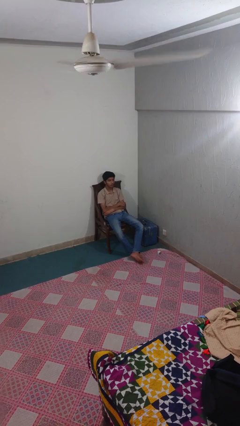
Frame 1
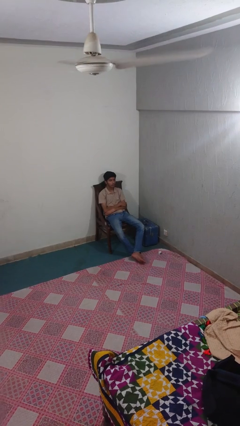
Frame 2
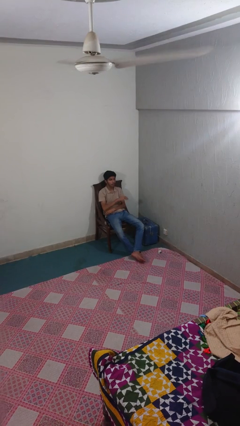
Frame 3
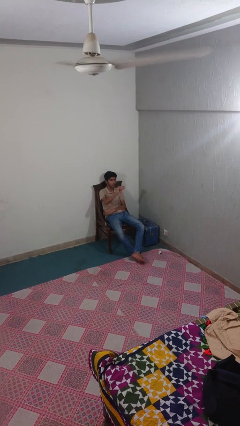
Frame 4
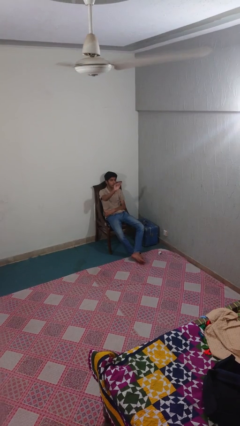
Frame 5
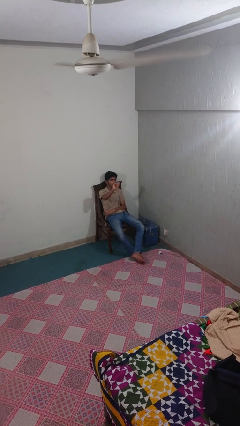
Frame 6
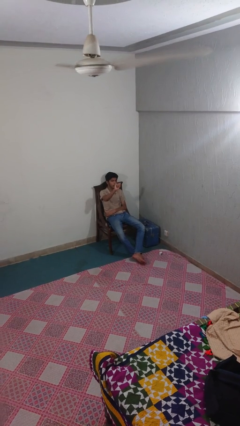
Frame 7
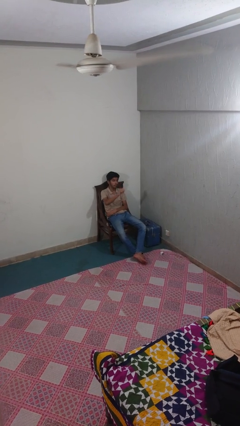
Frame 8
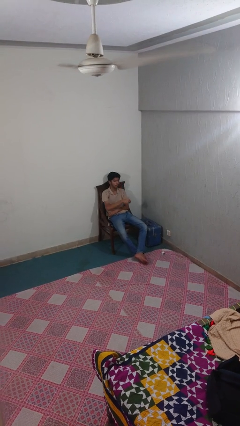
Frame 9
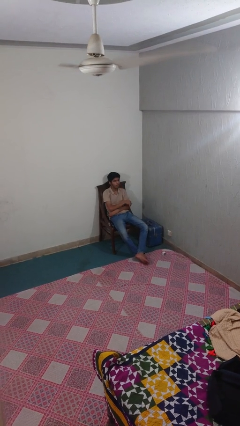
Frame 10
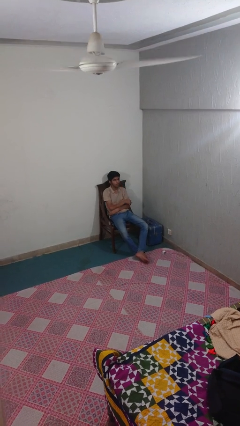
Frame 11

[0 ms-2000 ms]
person gestures come here

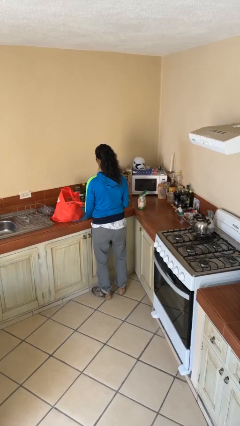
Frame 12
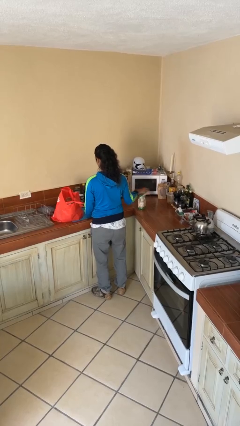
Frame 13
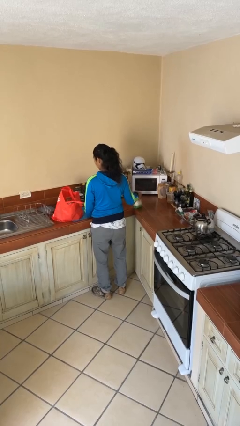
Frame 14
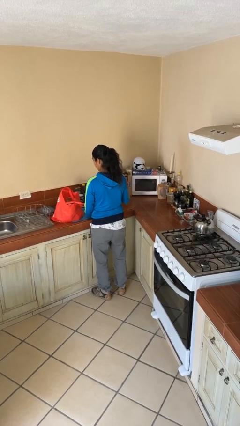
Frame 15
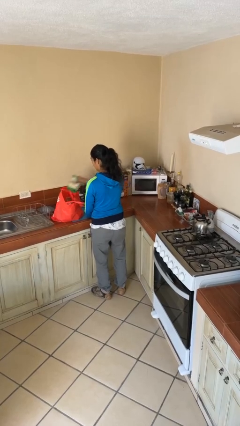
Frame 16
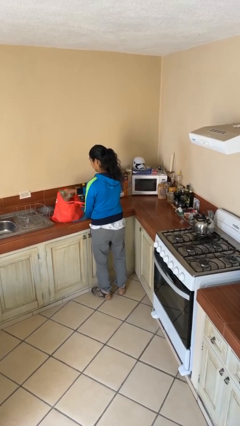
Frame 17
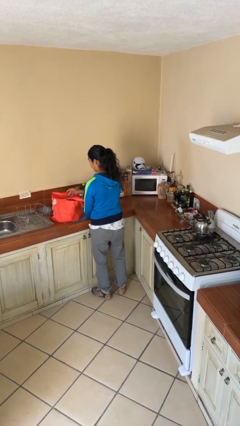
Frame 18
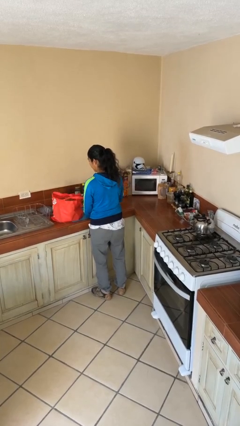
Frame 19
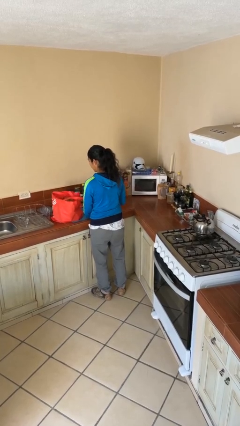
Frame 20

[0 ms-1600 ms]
person puts object into bag

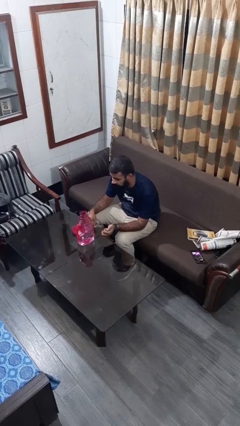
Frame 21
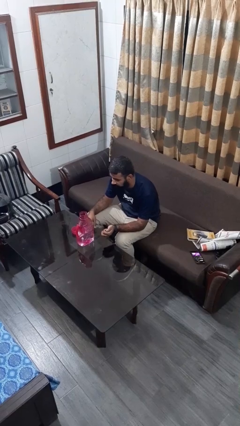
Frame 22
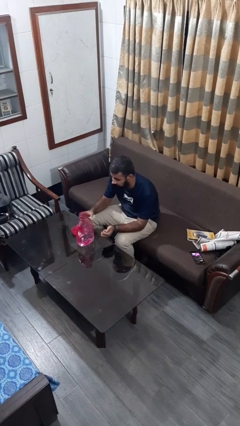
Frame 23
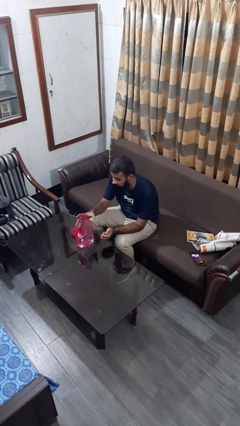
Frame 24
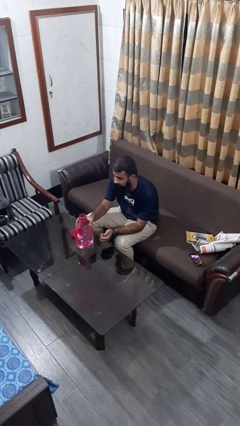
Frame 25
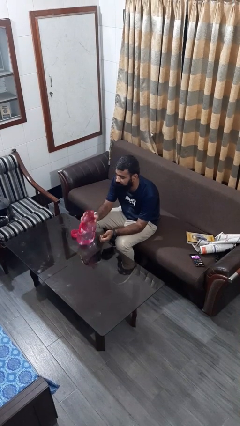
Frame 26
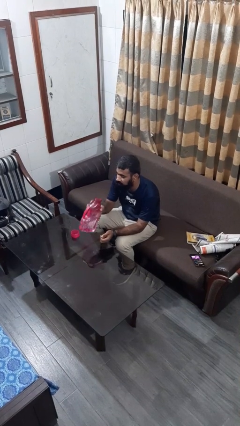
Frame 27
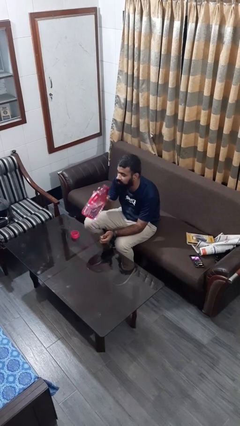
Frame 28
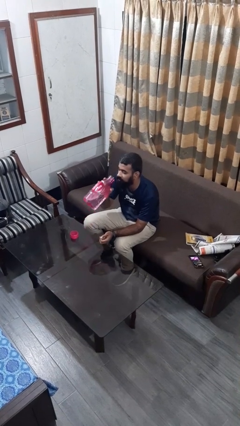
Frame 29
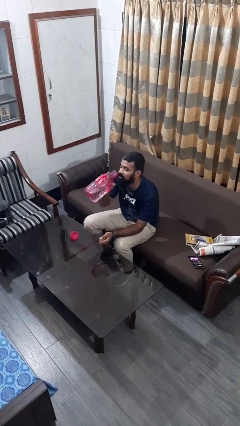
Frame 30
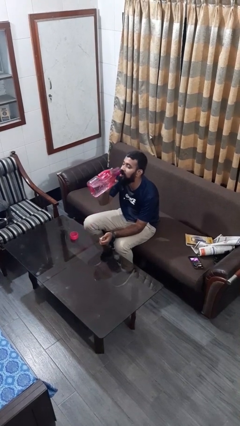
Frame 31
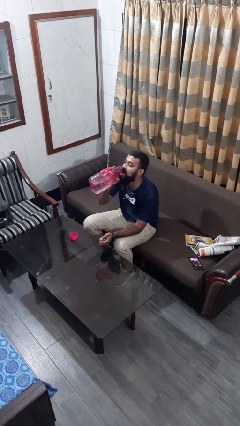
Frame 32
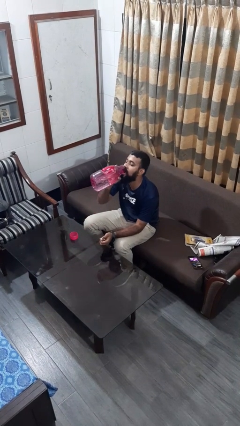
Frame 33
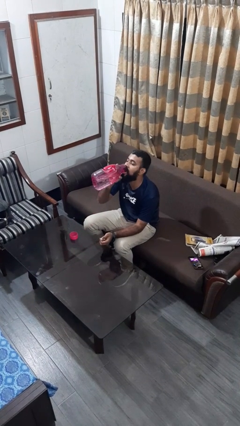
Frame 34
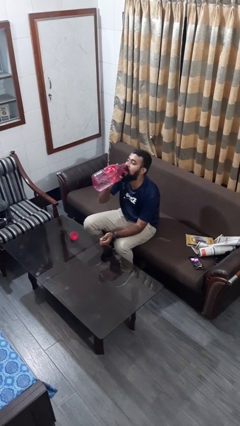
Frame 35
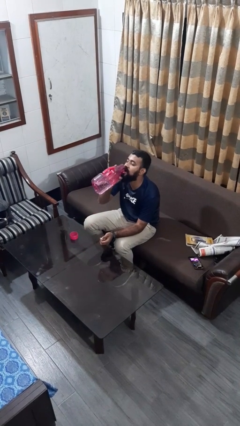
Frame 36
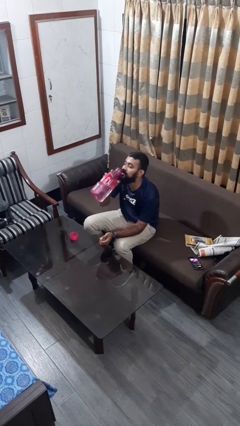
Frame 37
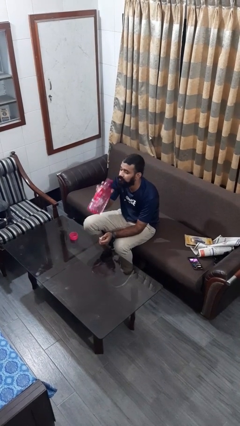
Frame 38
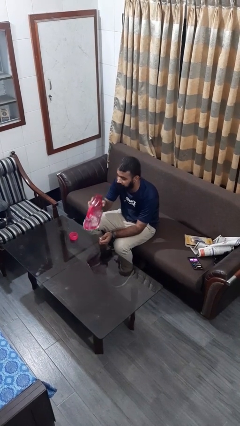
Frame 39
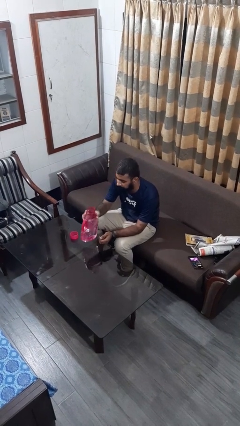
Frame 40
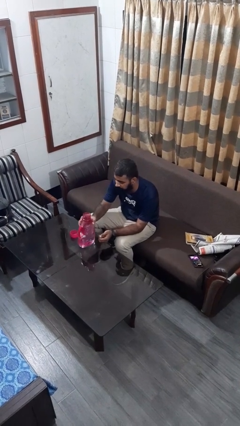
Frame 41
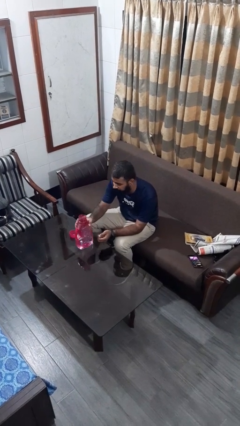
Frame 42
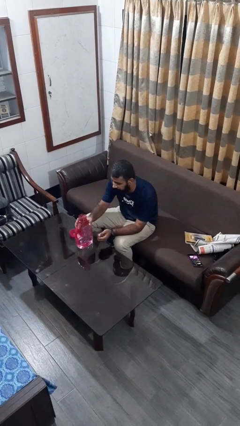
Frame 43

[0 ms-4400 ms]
person drinks from bottle

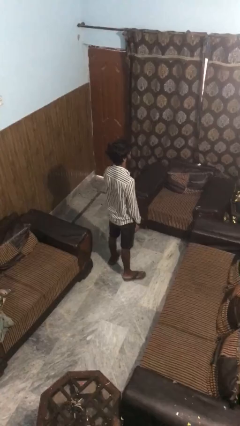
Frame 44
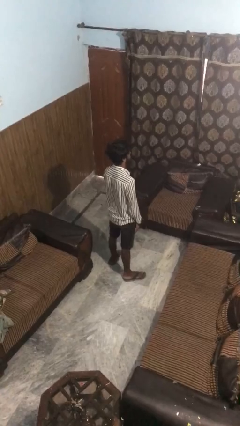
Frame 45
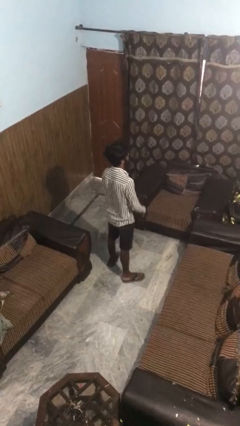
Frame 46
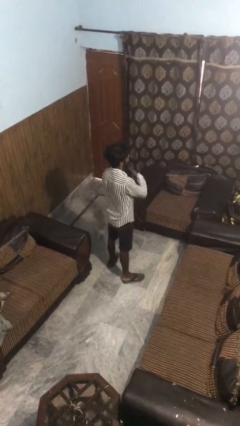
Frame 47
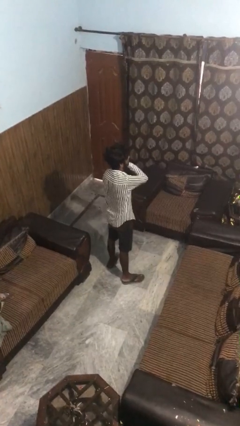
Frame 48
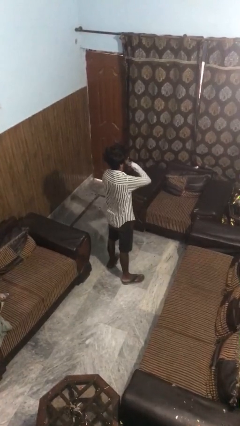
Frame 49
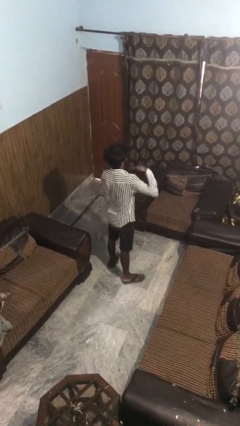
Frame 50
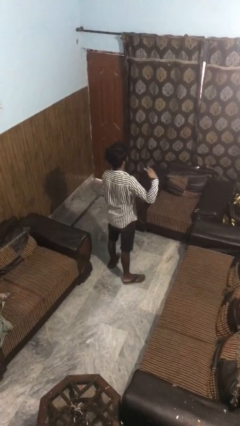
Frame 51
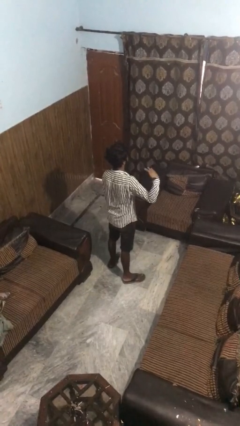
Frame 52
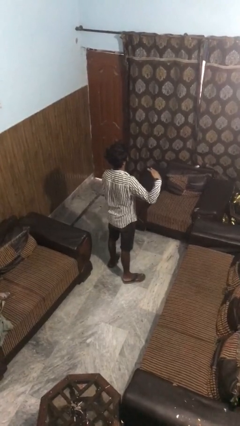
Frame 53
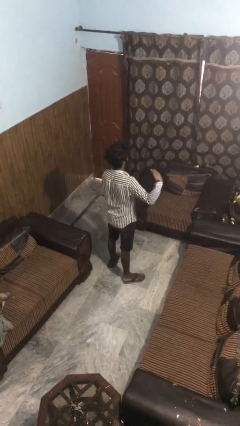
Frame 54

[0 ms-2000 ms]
person gestures cut

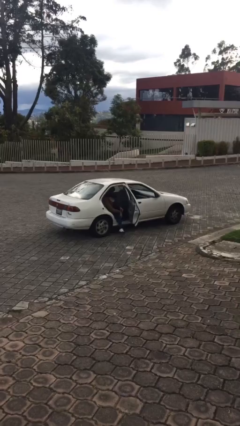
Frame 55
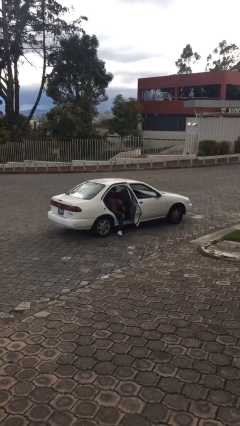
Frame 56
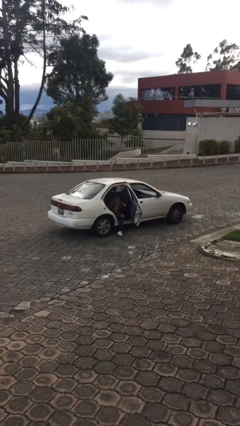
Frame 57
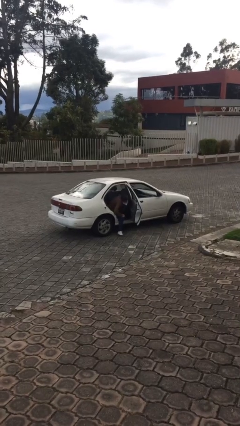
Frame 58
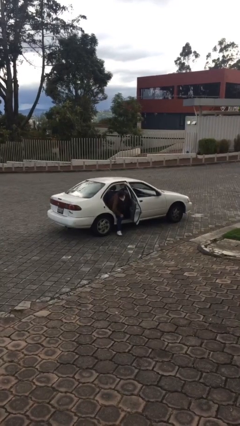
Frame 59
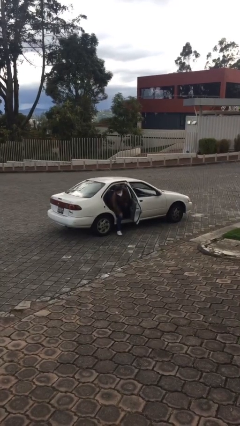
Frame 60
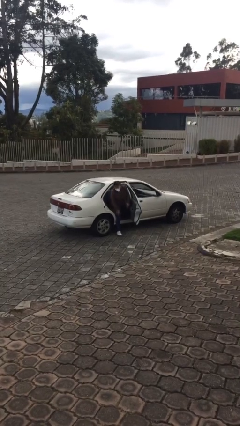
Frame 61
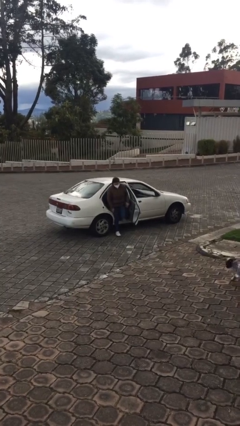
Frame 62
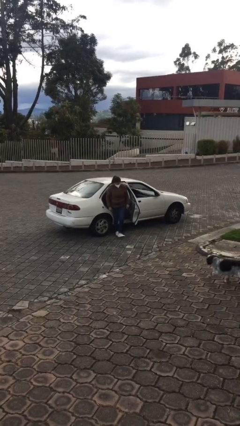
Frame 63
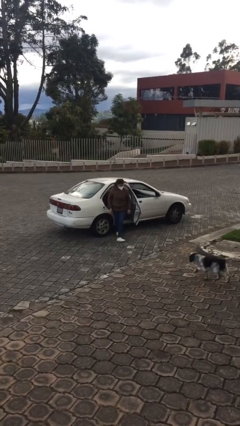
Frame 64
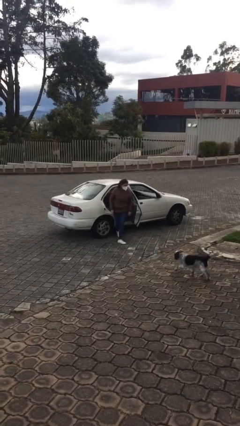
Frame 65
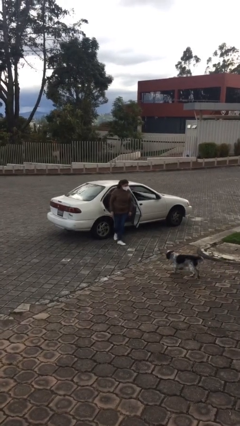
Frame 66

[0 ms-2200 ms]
person exits car

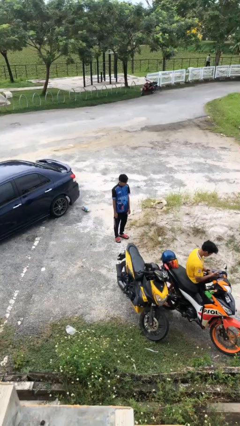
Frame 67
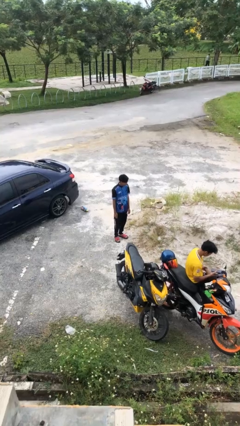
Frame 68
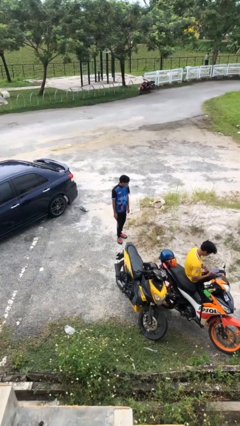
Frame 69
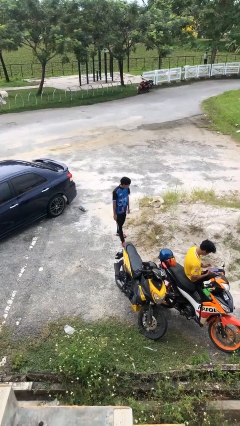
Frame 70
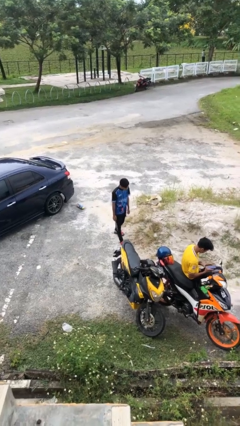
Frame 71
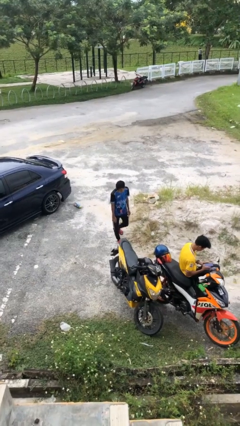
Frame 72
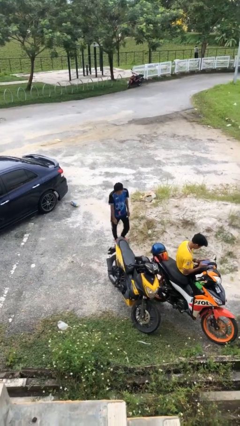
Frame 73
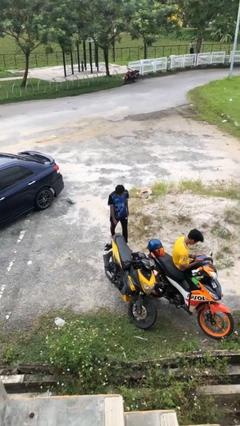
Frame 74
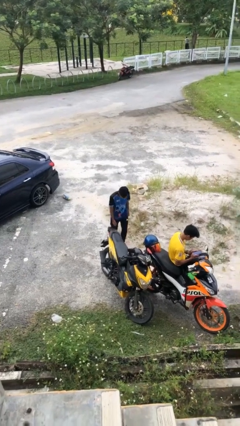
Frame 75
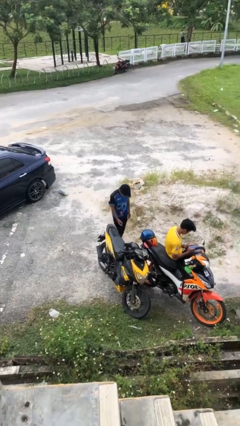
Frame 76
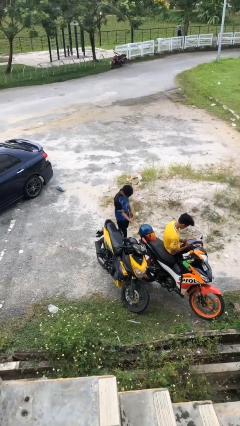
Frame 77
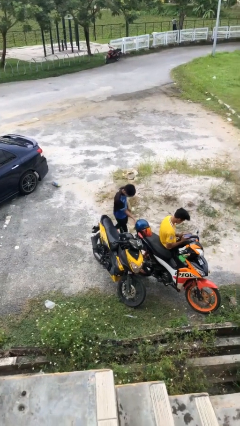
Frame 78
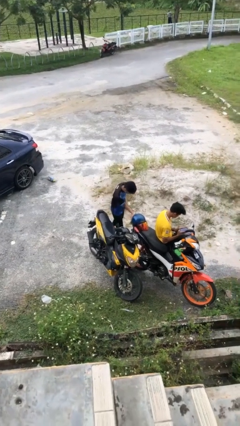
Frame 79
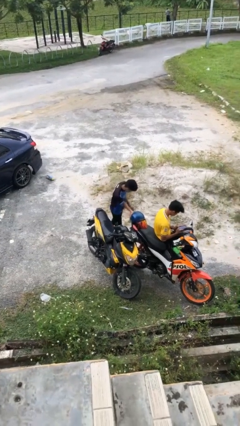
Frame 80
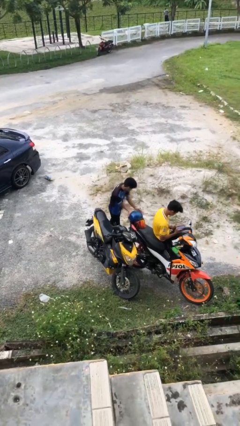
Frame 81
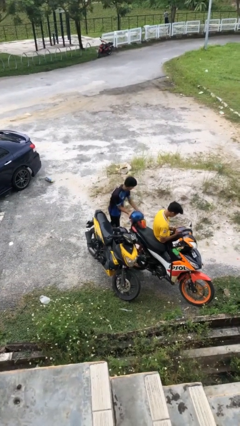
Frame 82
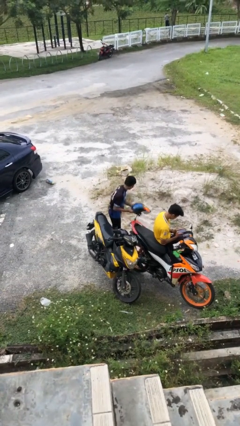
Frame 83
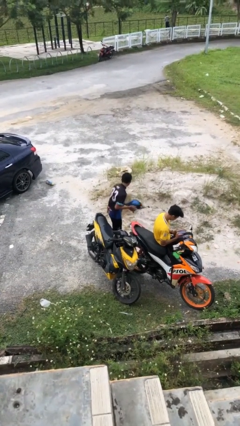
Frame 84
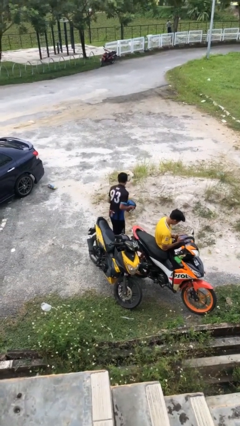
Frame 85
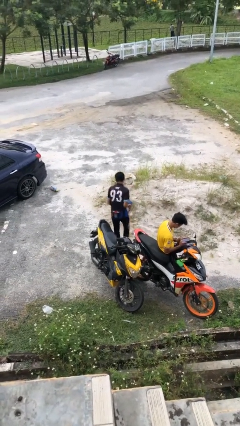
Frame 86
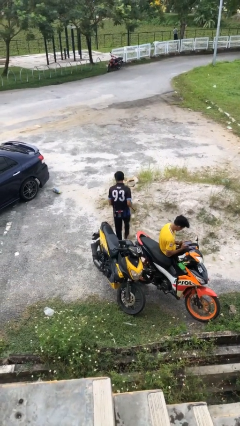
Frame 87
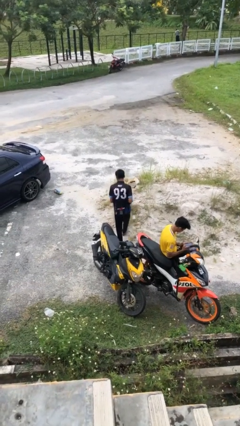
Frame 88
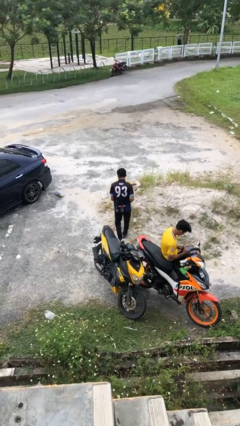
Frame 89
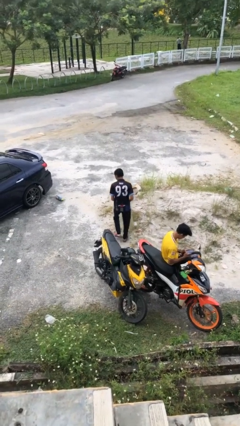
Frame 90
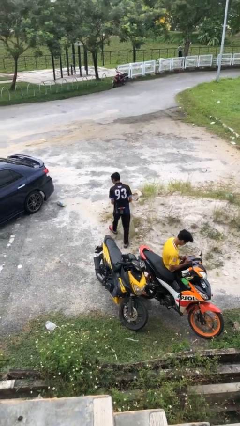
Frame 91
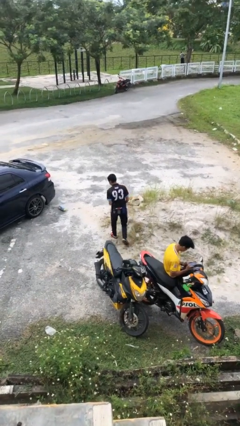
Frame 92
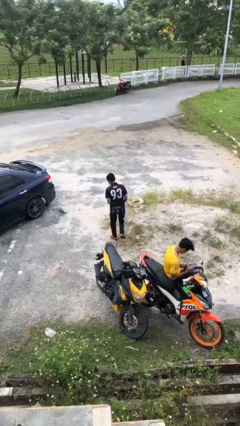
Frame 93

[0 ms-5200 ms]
person steals object from person
